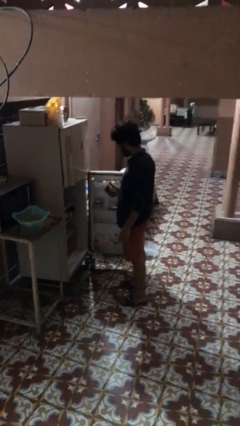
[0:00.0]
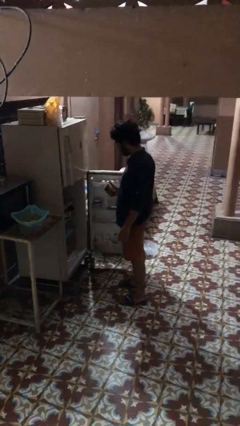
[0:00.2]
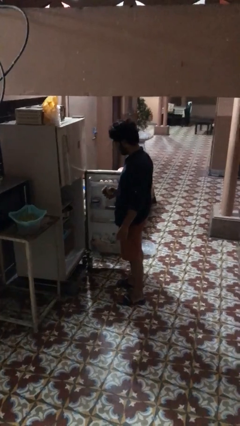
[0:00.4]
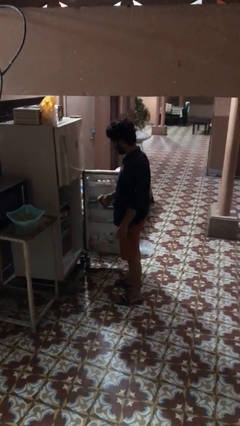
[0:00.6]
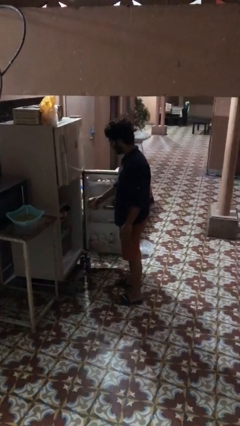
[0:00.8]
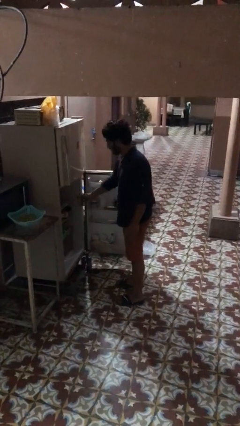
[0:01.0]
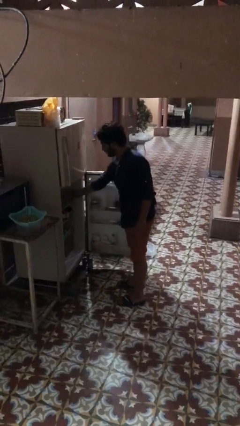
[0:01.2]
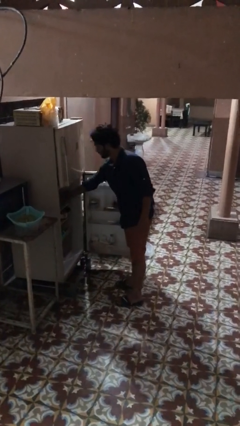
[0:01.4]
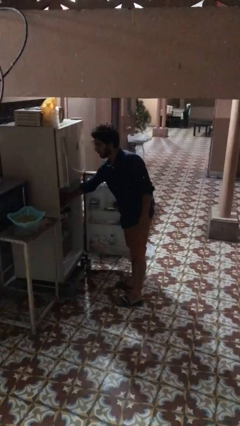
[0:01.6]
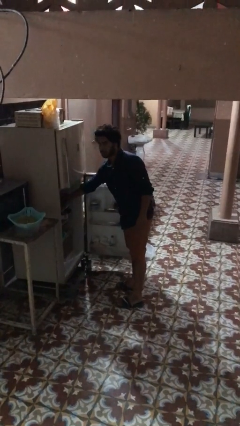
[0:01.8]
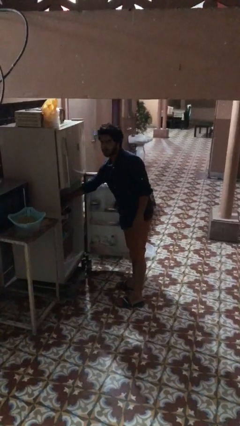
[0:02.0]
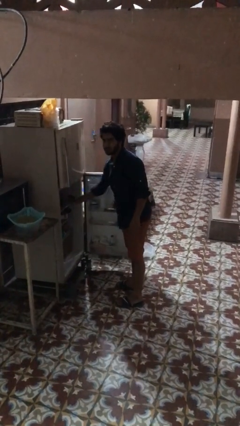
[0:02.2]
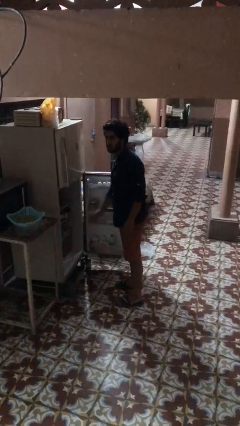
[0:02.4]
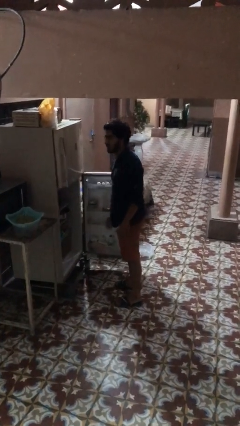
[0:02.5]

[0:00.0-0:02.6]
person puts object into refrigerator

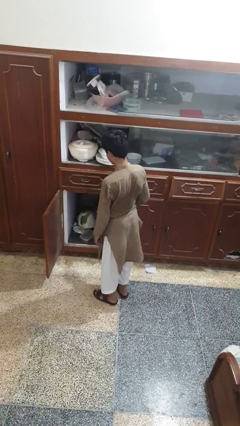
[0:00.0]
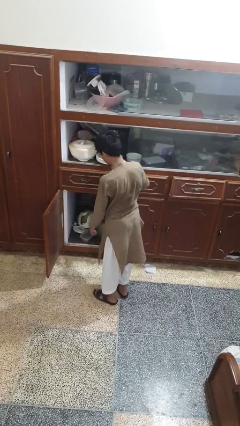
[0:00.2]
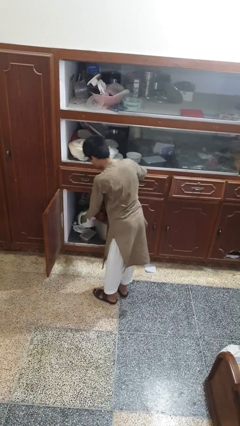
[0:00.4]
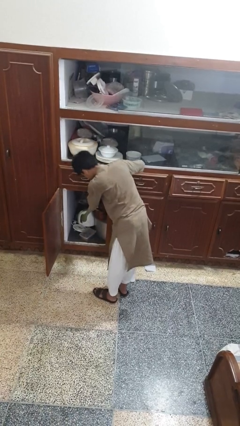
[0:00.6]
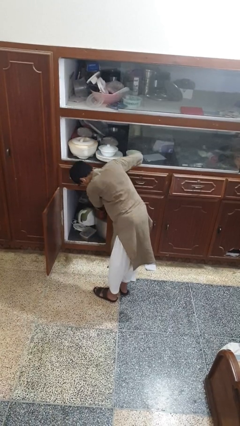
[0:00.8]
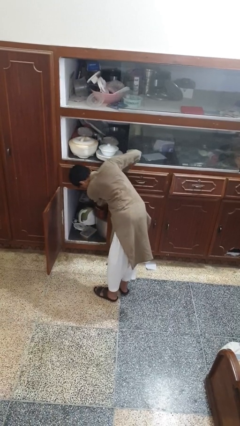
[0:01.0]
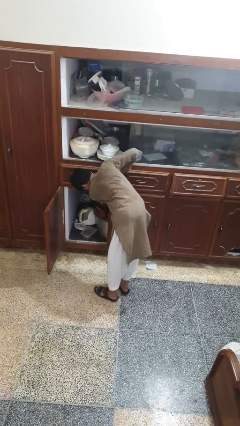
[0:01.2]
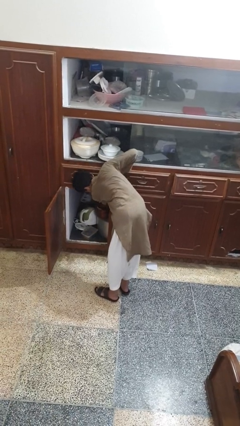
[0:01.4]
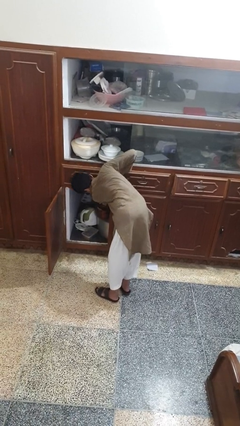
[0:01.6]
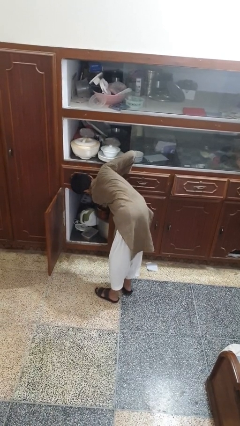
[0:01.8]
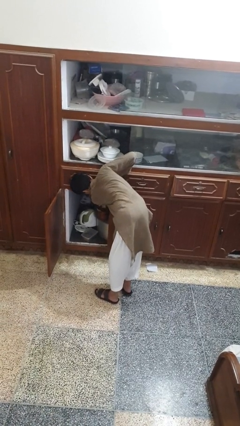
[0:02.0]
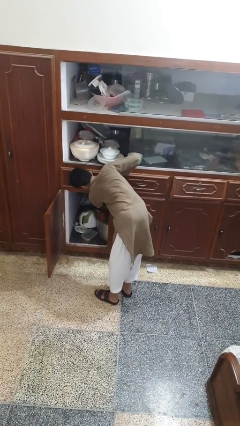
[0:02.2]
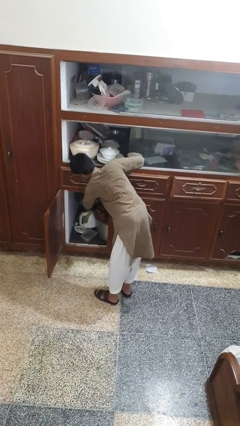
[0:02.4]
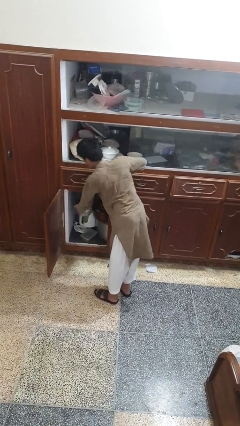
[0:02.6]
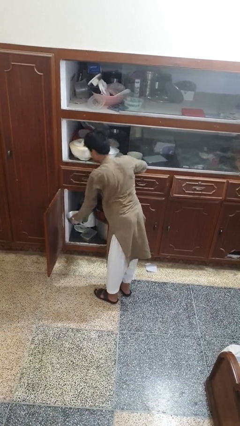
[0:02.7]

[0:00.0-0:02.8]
person takes object from cabinet

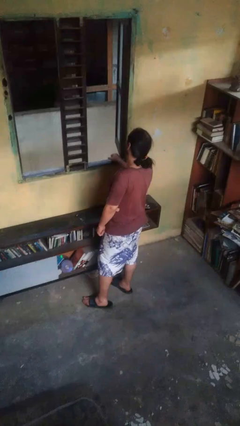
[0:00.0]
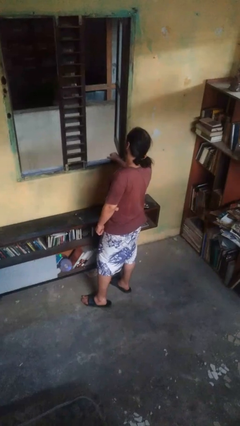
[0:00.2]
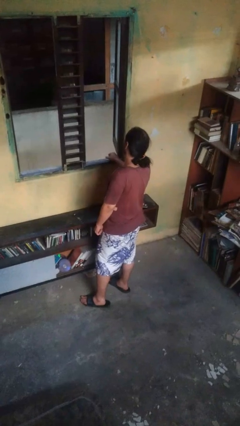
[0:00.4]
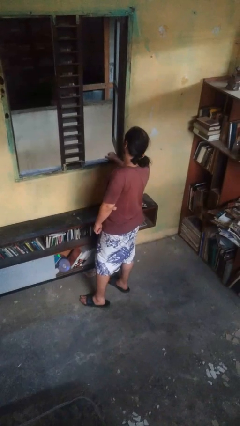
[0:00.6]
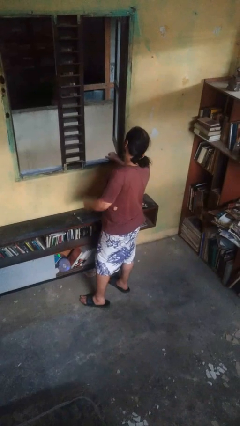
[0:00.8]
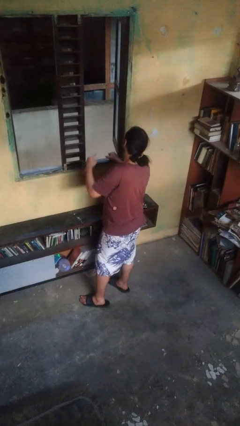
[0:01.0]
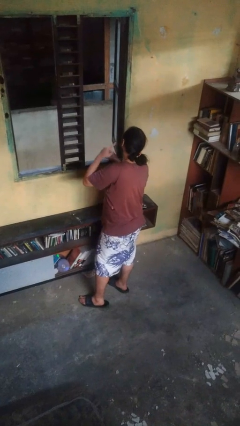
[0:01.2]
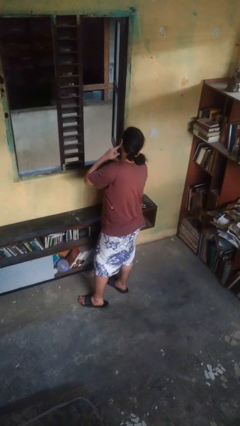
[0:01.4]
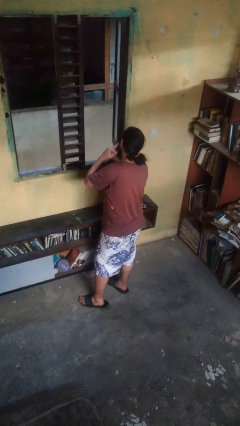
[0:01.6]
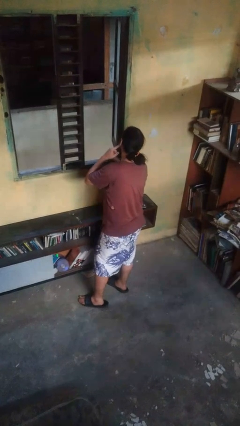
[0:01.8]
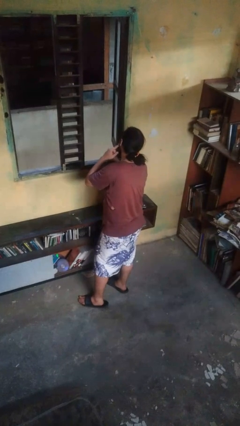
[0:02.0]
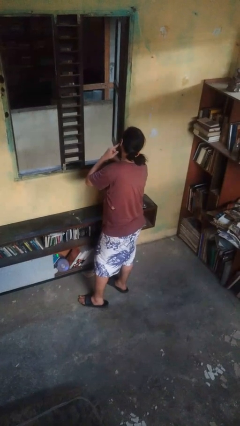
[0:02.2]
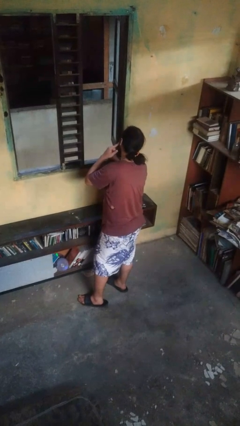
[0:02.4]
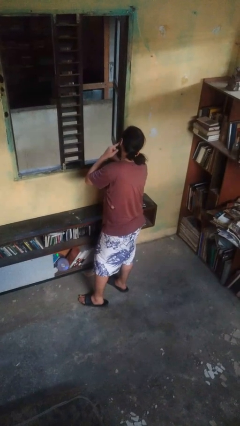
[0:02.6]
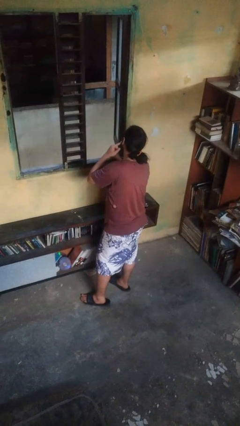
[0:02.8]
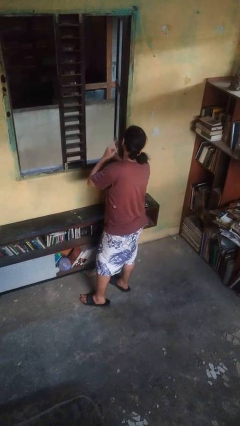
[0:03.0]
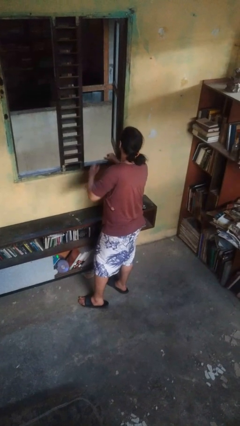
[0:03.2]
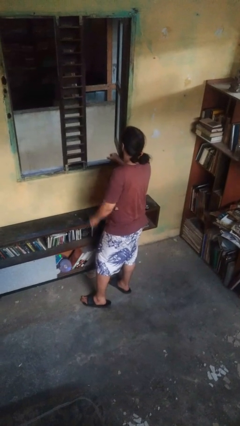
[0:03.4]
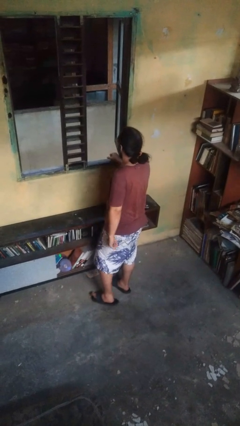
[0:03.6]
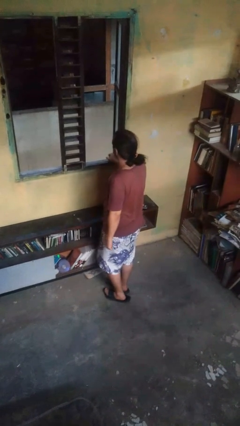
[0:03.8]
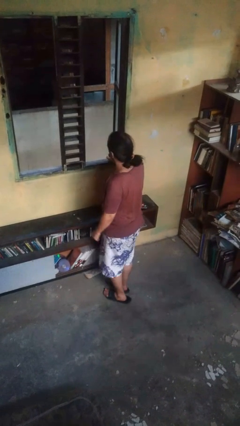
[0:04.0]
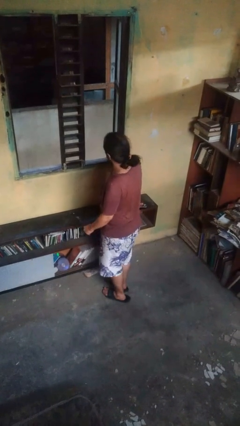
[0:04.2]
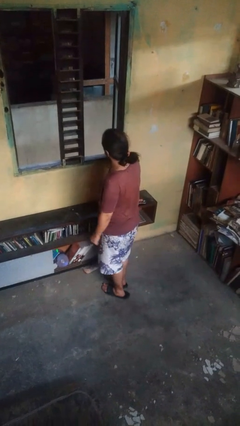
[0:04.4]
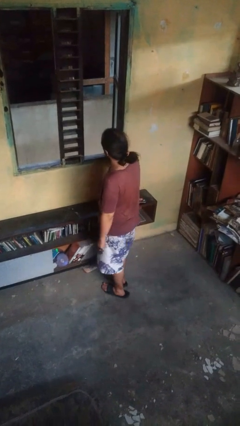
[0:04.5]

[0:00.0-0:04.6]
person gestures listen closely

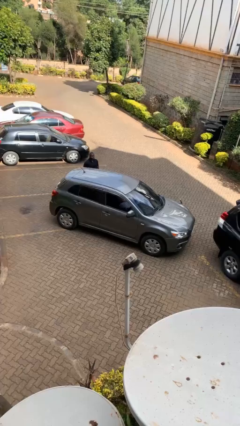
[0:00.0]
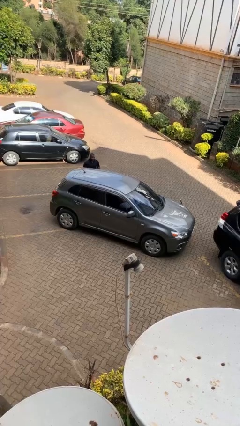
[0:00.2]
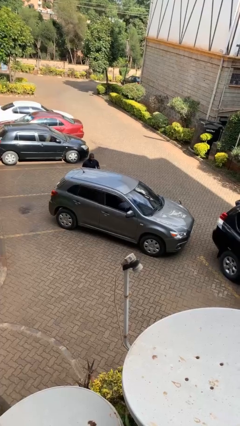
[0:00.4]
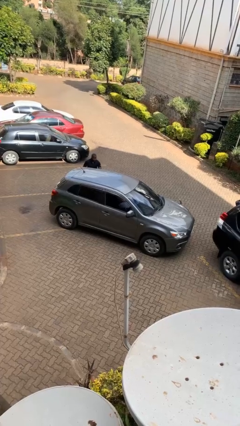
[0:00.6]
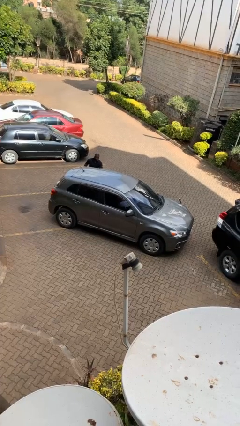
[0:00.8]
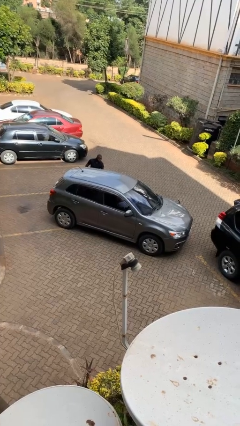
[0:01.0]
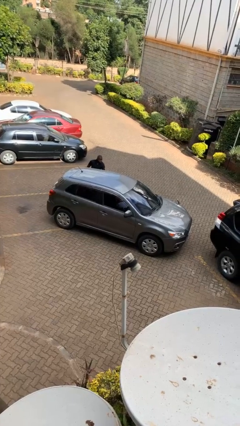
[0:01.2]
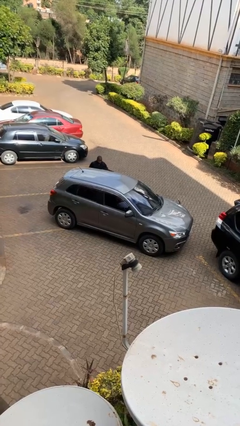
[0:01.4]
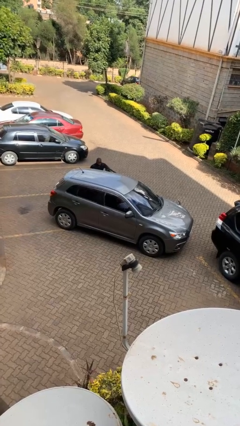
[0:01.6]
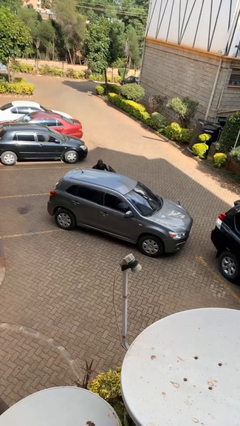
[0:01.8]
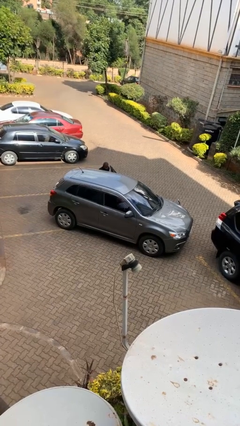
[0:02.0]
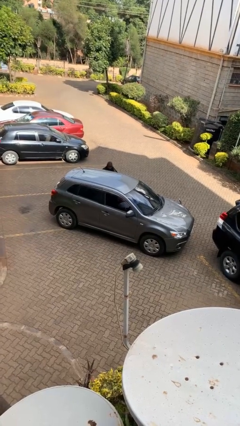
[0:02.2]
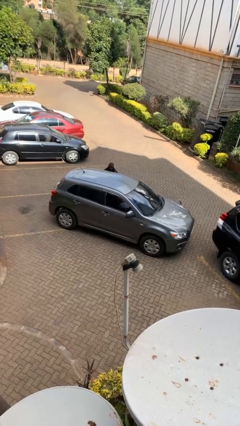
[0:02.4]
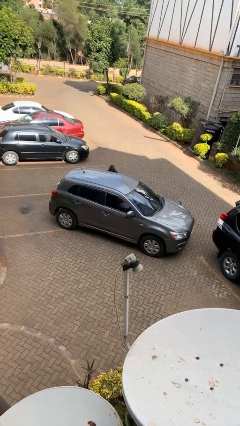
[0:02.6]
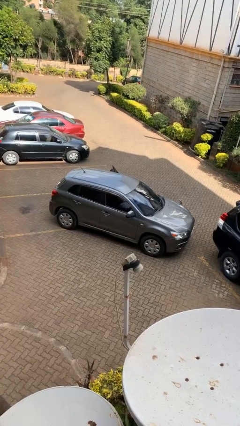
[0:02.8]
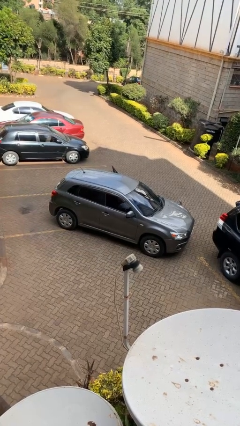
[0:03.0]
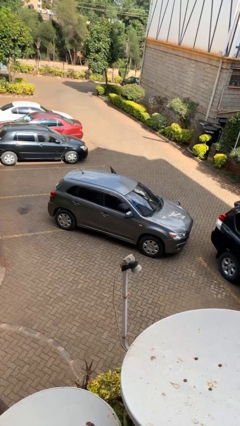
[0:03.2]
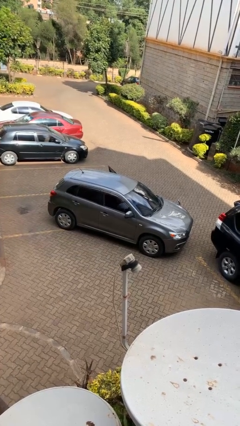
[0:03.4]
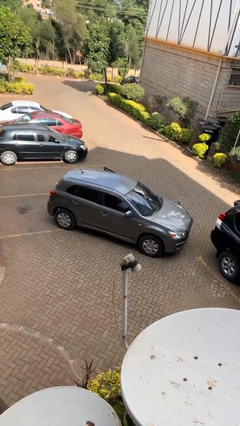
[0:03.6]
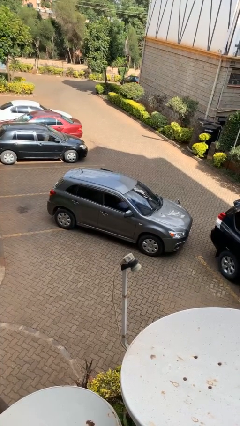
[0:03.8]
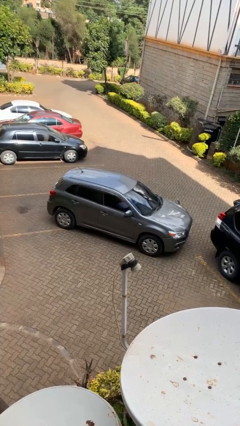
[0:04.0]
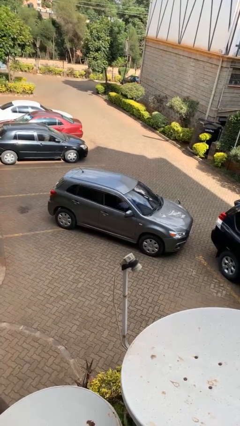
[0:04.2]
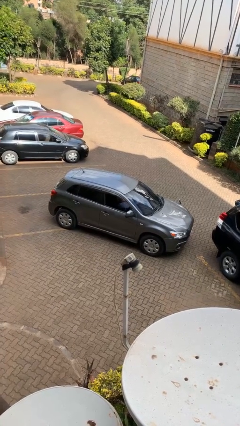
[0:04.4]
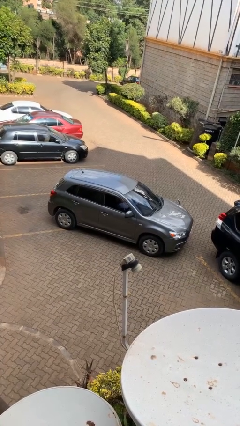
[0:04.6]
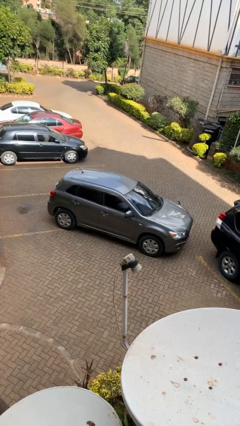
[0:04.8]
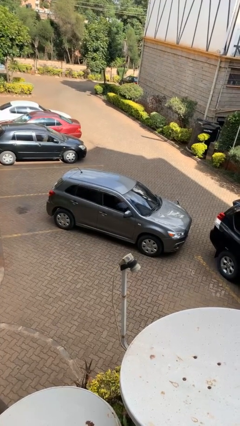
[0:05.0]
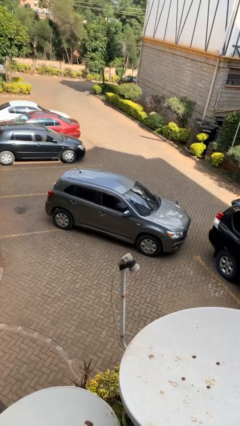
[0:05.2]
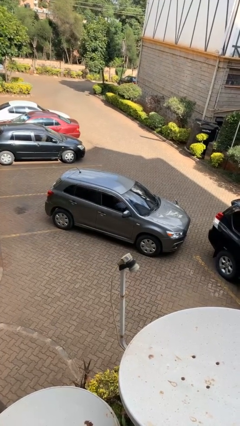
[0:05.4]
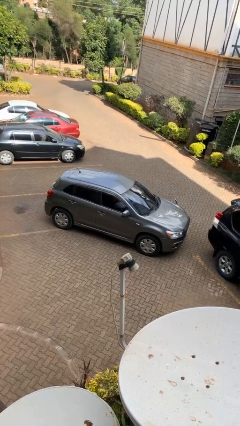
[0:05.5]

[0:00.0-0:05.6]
car picks up person

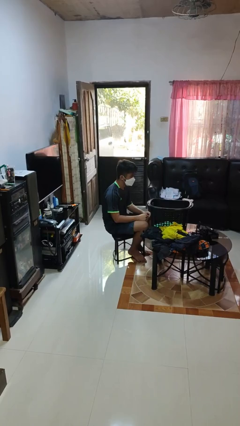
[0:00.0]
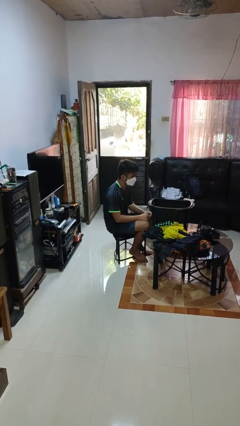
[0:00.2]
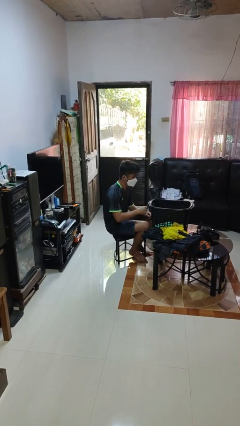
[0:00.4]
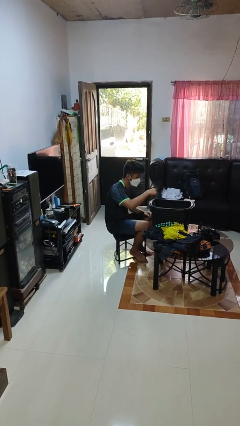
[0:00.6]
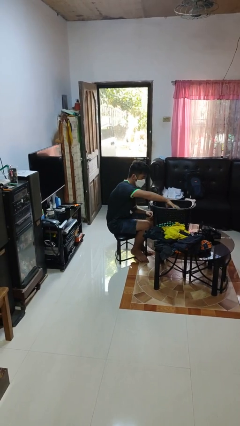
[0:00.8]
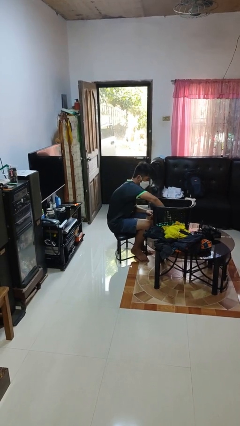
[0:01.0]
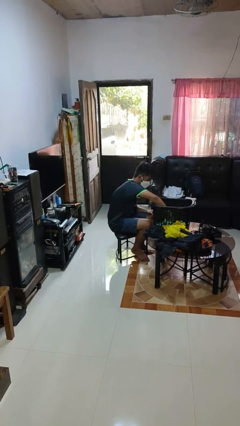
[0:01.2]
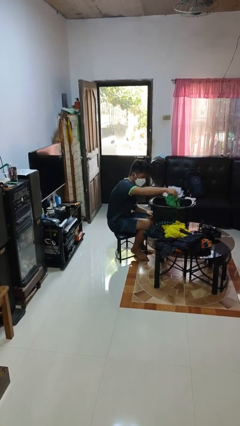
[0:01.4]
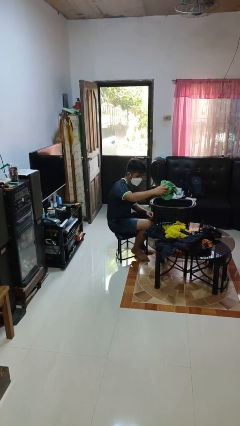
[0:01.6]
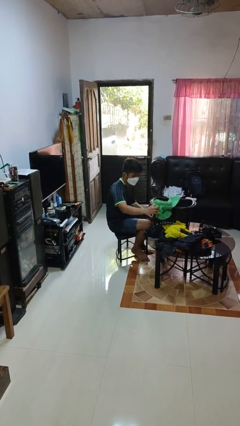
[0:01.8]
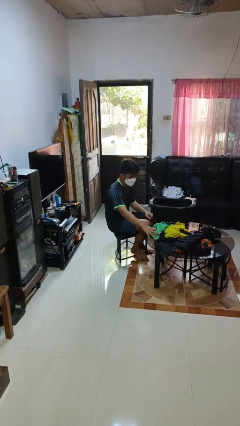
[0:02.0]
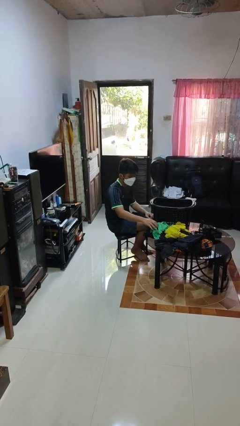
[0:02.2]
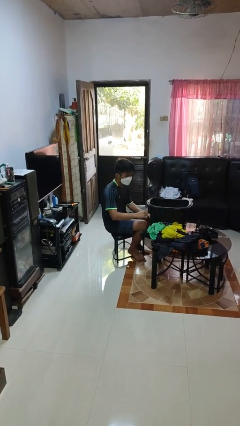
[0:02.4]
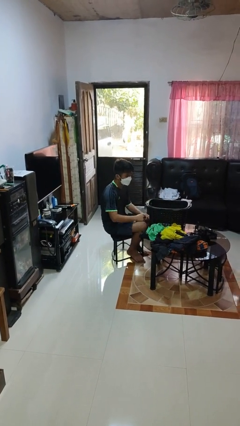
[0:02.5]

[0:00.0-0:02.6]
person takes object from basket
